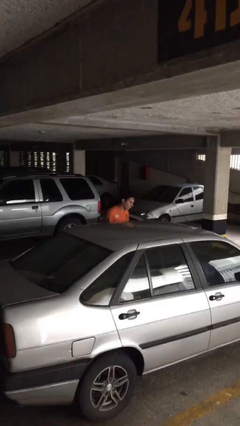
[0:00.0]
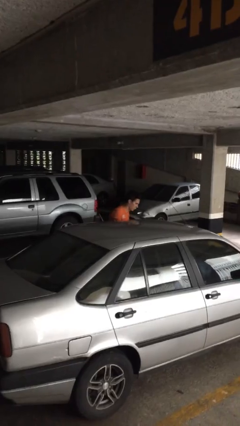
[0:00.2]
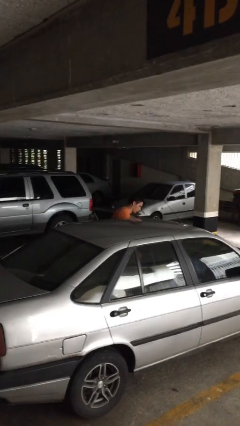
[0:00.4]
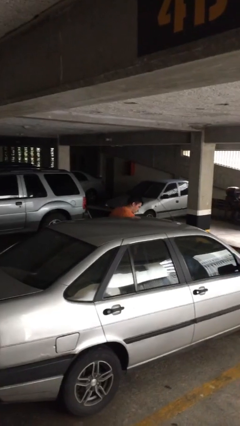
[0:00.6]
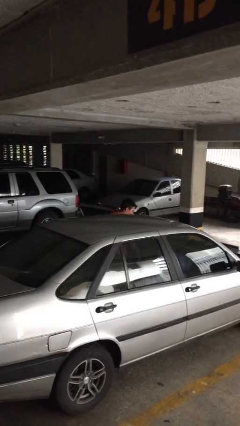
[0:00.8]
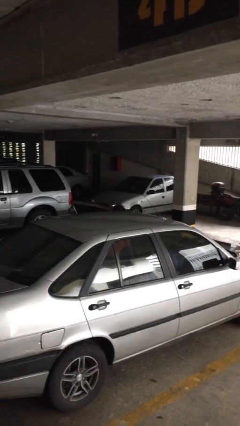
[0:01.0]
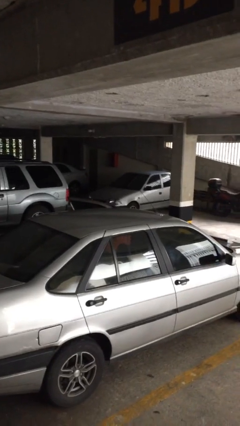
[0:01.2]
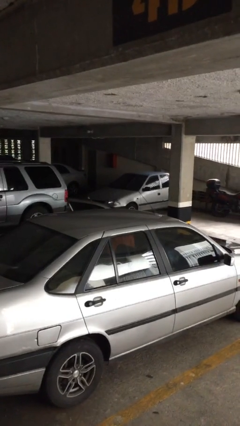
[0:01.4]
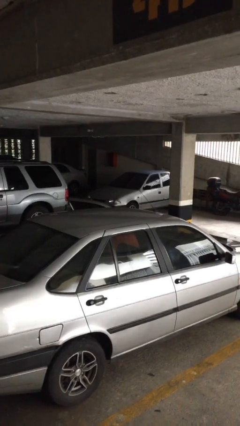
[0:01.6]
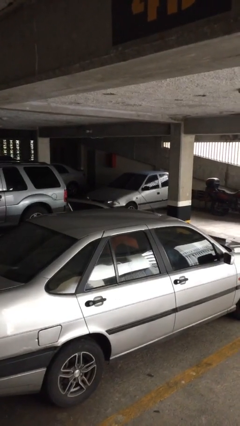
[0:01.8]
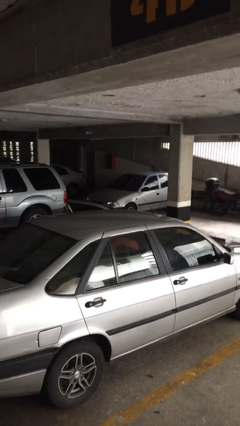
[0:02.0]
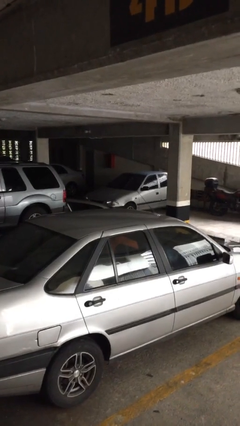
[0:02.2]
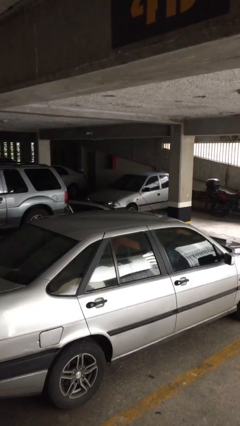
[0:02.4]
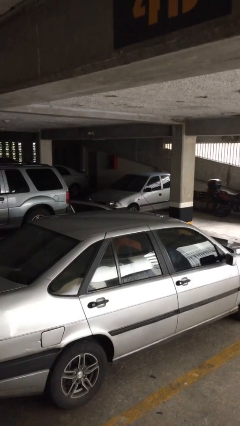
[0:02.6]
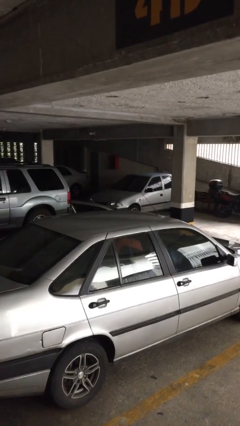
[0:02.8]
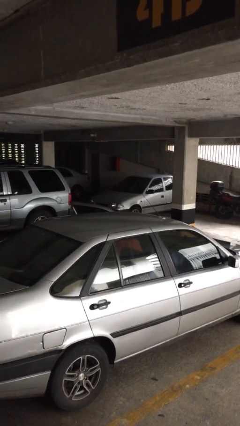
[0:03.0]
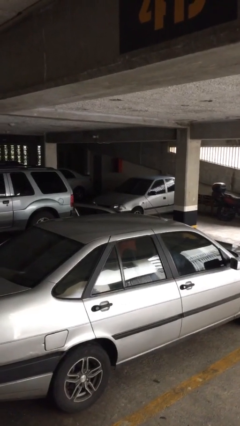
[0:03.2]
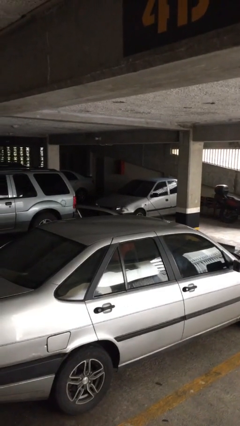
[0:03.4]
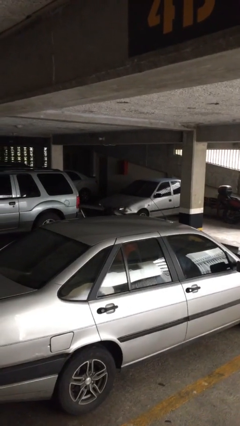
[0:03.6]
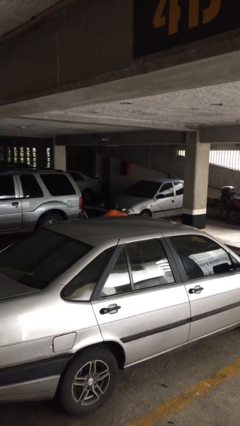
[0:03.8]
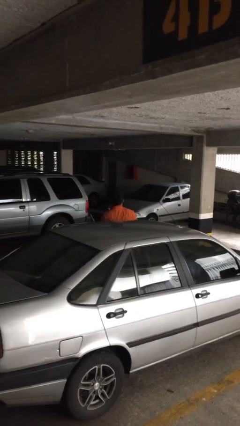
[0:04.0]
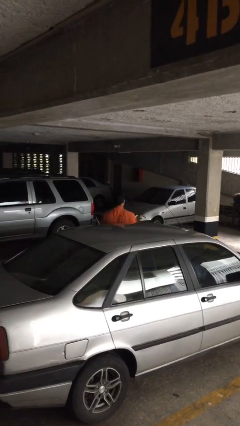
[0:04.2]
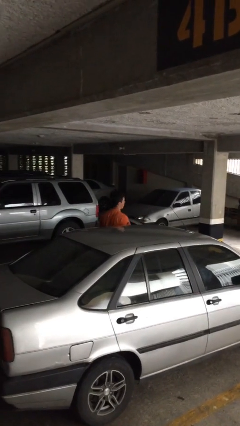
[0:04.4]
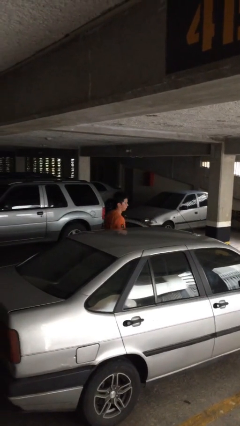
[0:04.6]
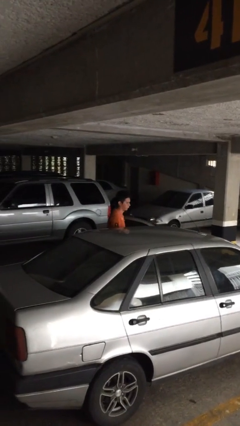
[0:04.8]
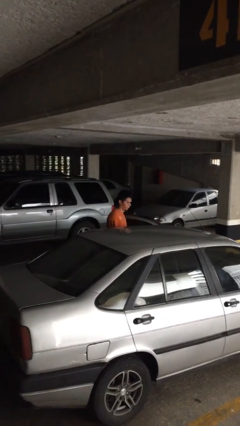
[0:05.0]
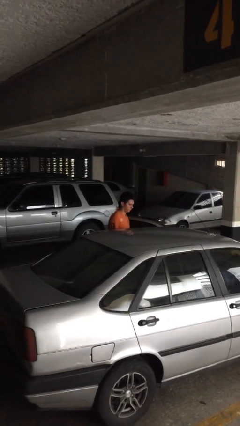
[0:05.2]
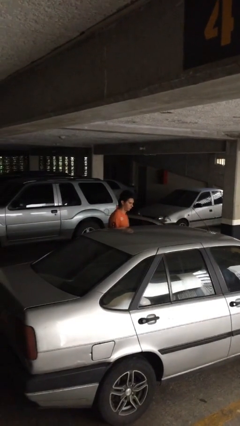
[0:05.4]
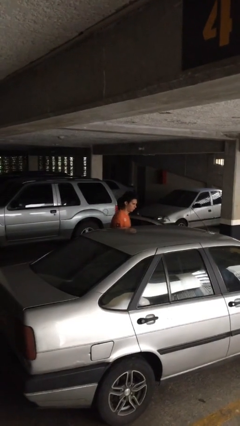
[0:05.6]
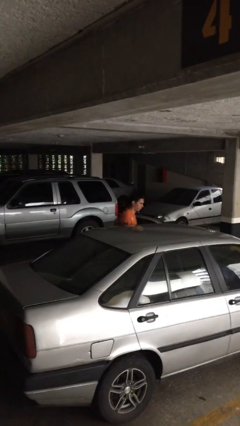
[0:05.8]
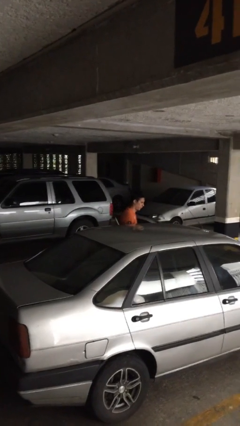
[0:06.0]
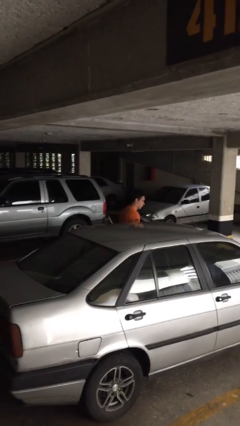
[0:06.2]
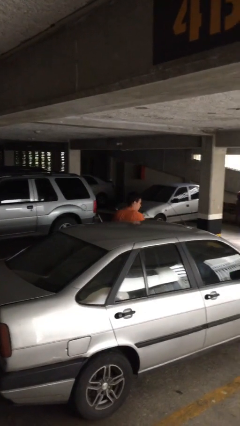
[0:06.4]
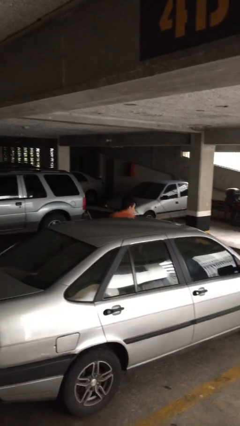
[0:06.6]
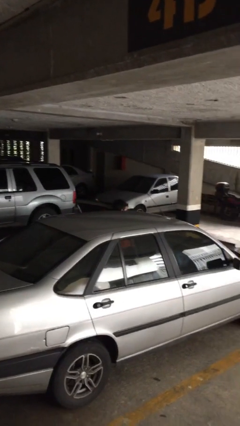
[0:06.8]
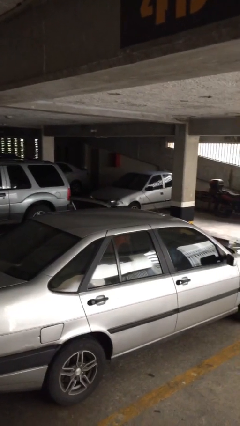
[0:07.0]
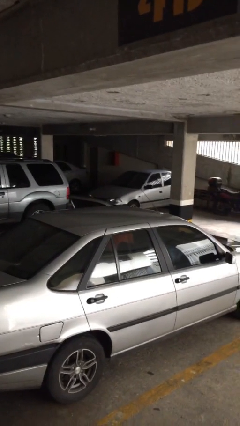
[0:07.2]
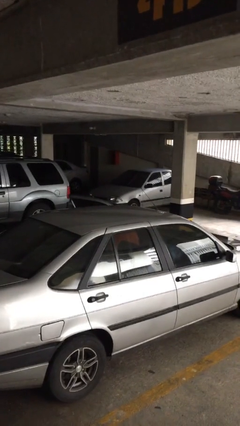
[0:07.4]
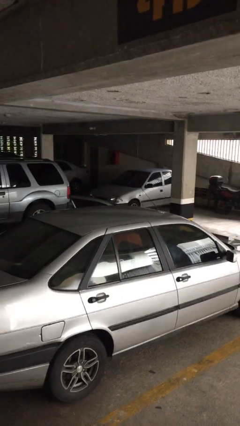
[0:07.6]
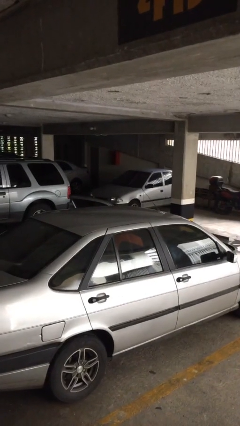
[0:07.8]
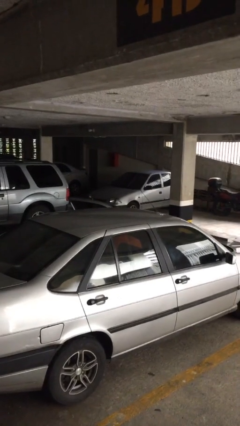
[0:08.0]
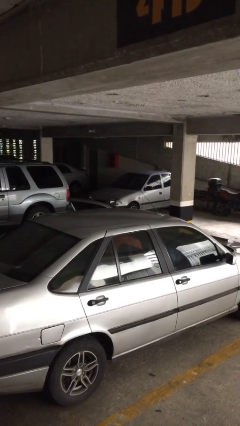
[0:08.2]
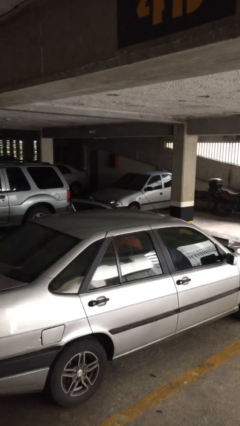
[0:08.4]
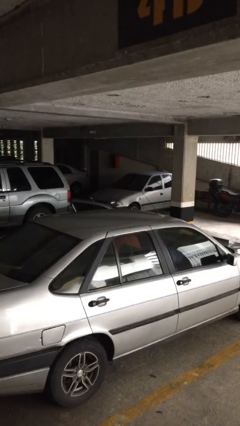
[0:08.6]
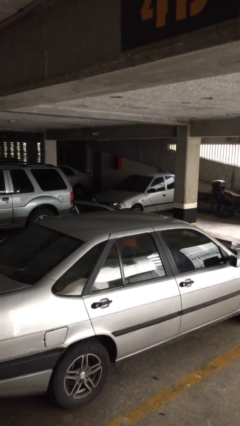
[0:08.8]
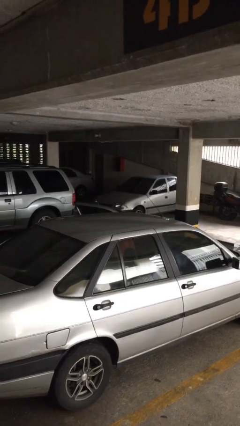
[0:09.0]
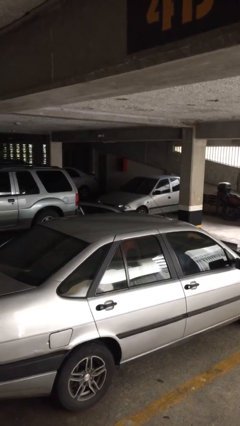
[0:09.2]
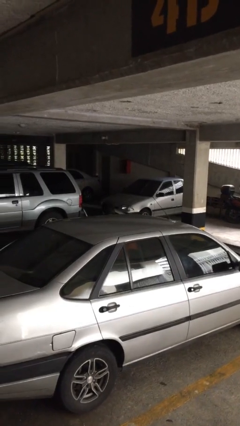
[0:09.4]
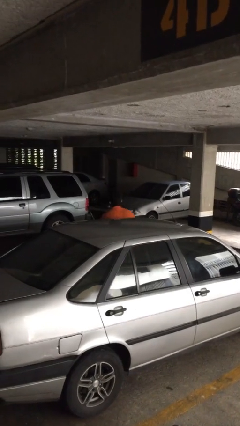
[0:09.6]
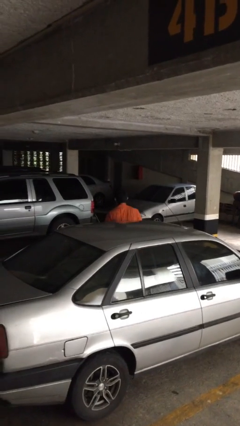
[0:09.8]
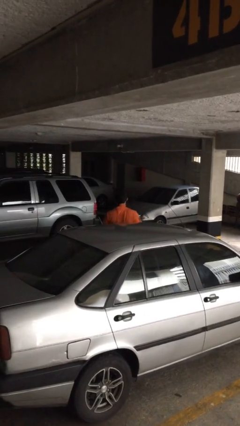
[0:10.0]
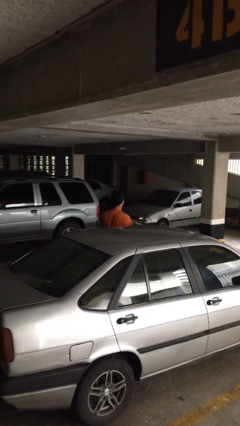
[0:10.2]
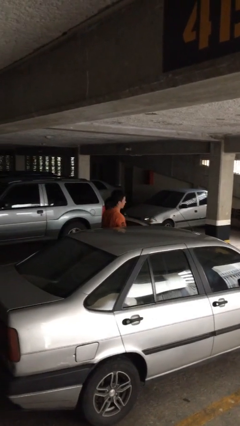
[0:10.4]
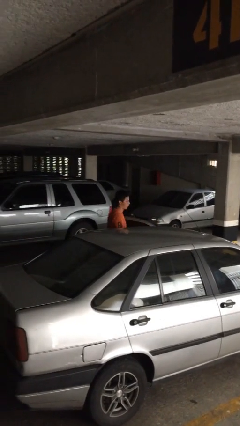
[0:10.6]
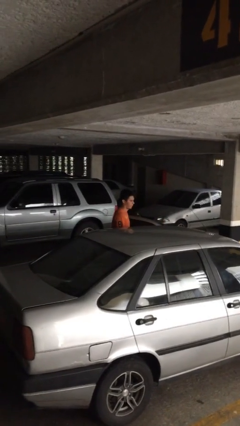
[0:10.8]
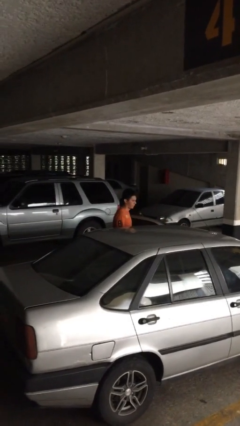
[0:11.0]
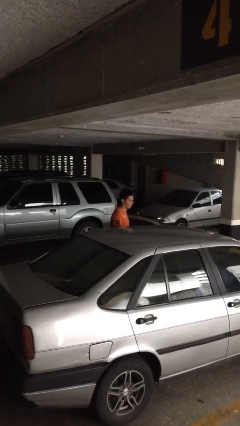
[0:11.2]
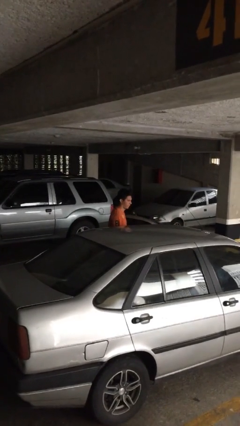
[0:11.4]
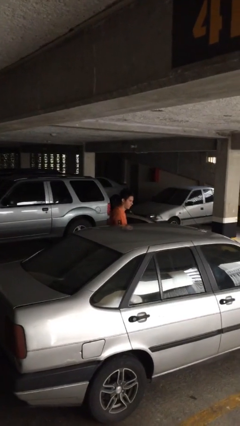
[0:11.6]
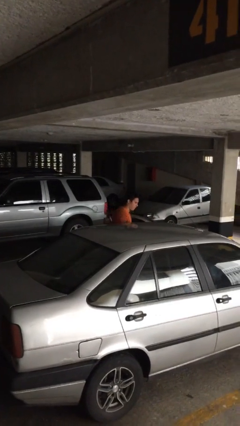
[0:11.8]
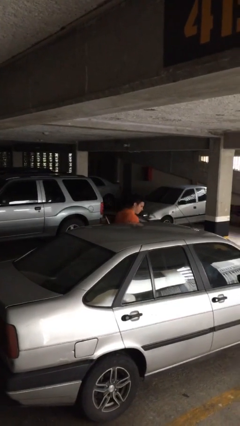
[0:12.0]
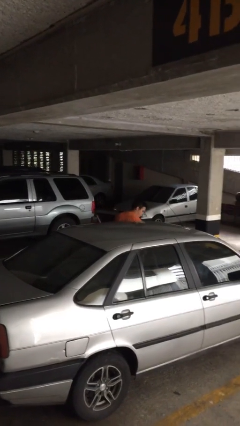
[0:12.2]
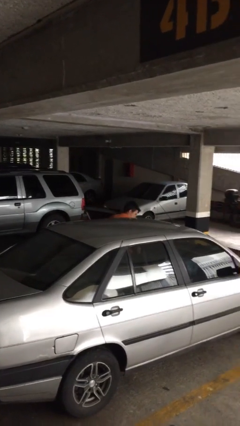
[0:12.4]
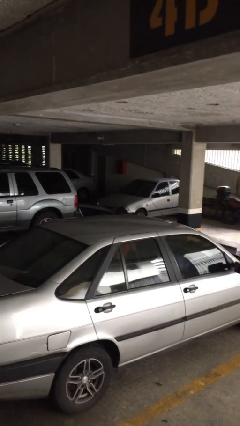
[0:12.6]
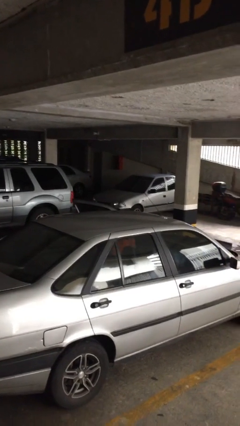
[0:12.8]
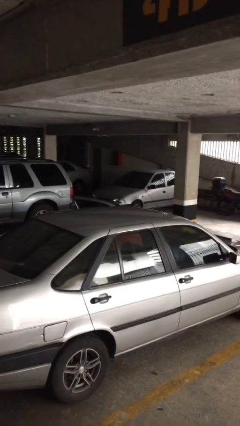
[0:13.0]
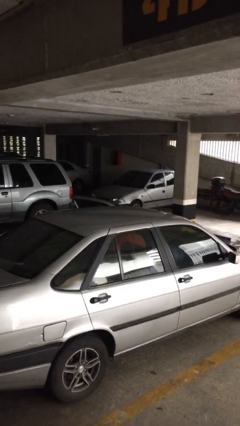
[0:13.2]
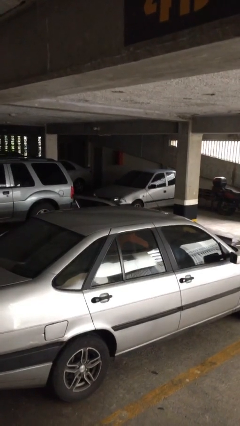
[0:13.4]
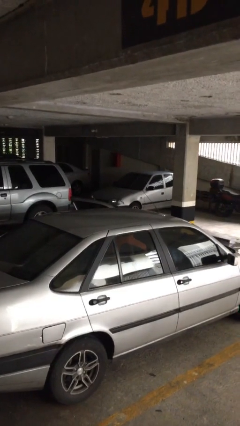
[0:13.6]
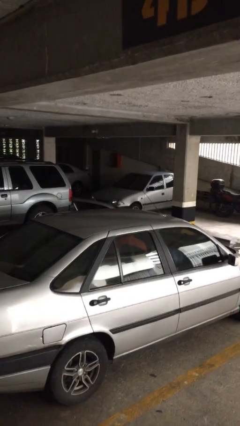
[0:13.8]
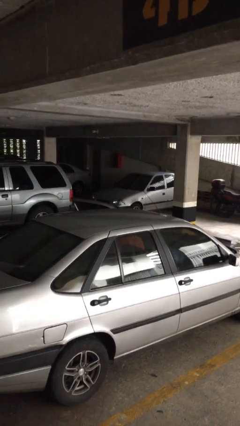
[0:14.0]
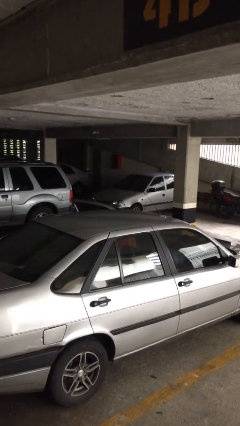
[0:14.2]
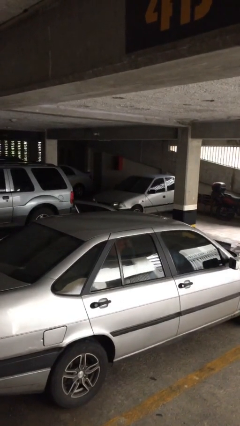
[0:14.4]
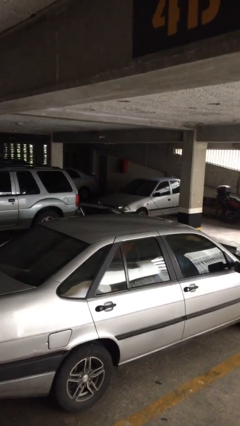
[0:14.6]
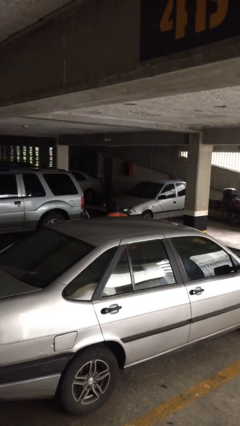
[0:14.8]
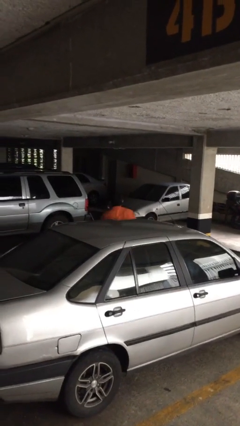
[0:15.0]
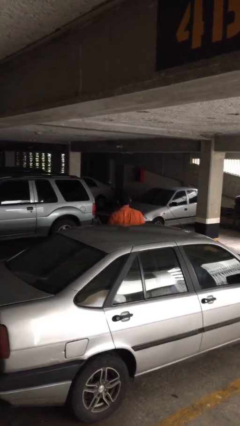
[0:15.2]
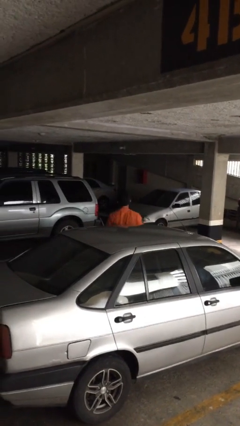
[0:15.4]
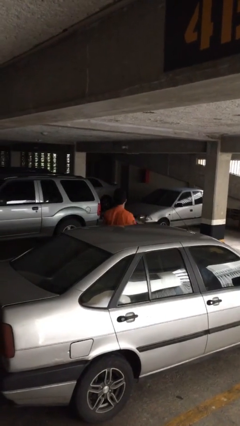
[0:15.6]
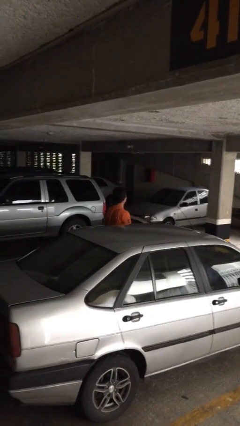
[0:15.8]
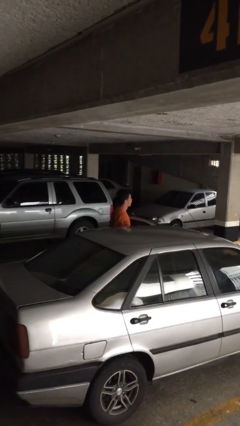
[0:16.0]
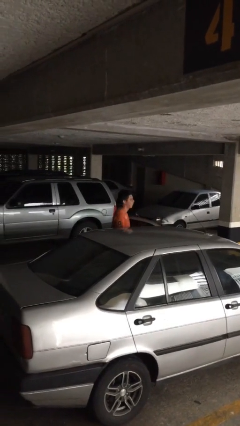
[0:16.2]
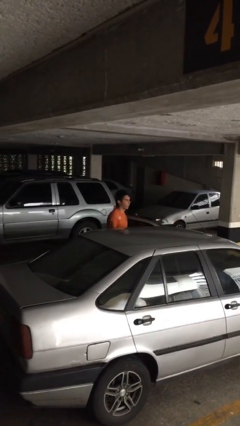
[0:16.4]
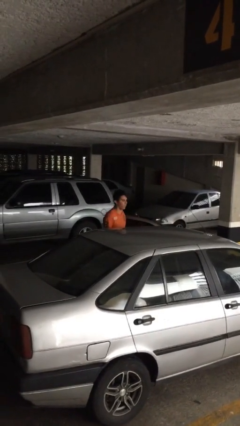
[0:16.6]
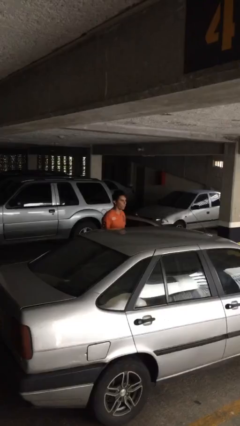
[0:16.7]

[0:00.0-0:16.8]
person texts on phone

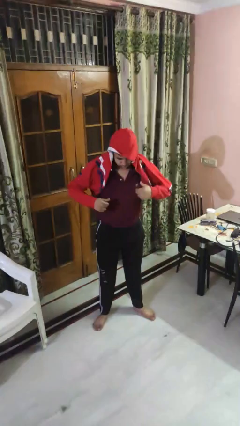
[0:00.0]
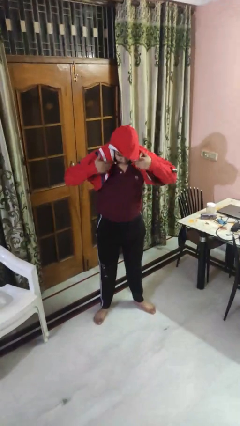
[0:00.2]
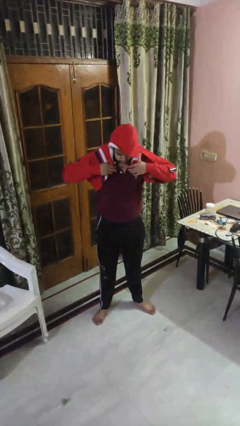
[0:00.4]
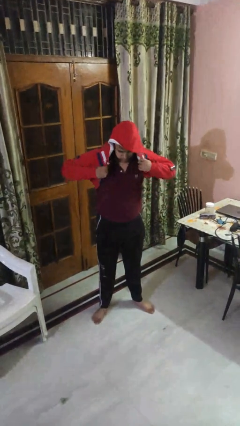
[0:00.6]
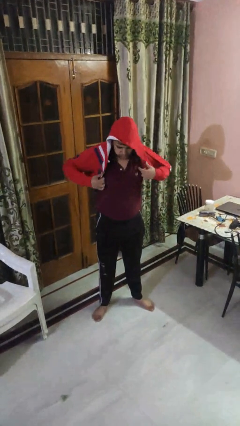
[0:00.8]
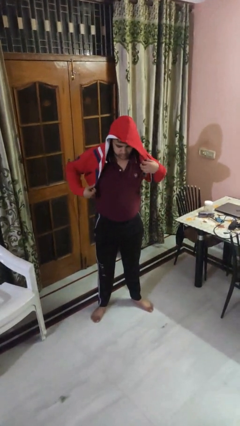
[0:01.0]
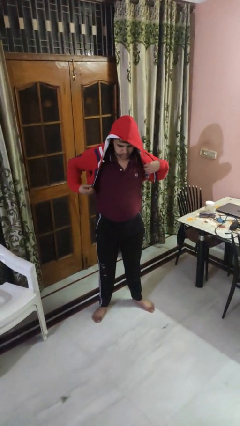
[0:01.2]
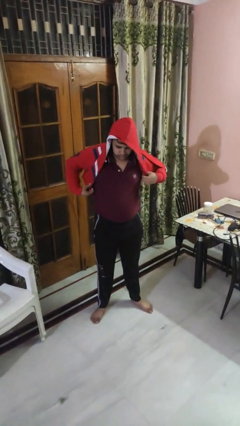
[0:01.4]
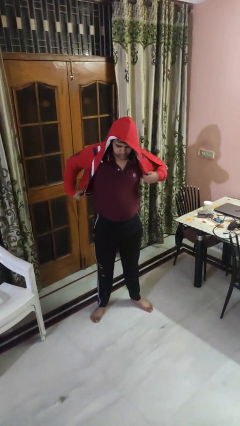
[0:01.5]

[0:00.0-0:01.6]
person puts on hoodie
